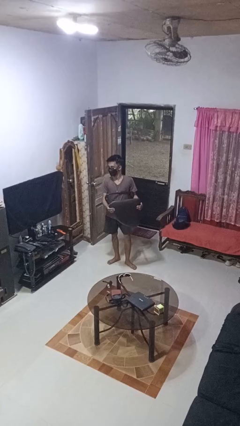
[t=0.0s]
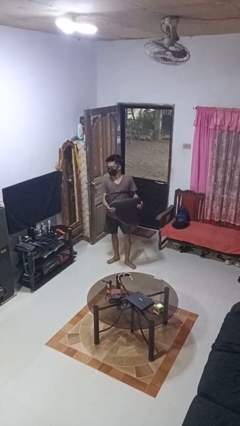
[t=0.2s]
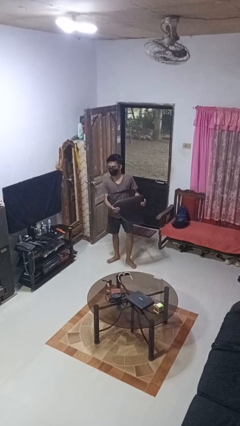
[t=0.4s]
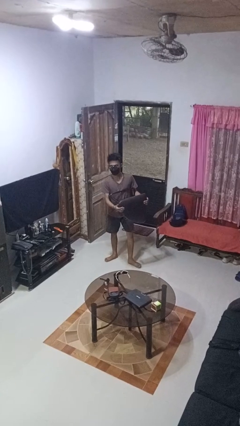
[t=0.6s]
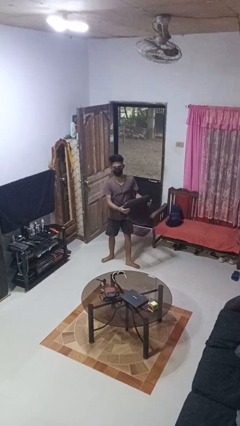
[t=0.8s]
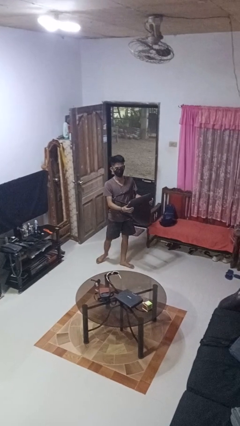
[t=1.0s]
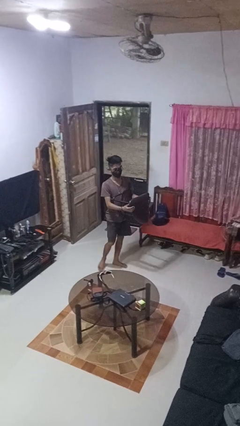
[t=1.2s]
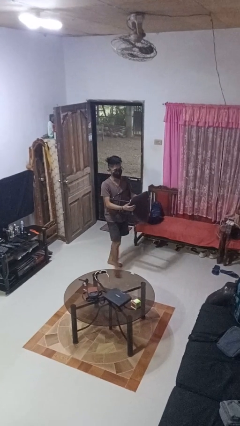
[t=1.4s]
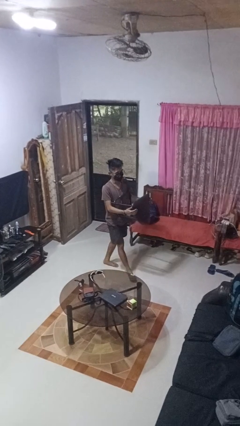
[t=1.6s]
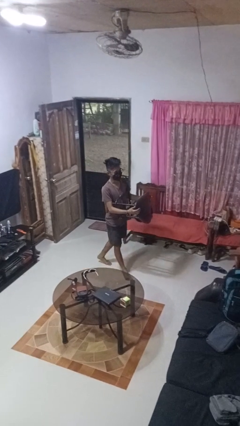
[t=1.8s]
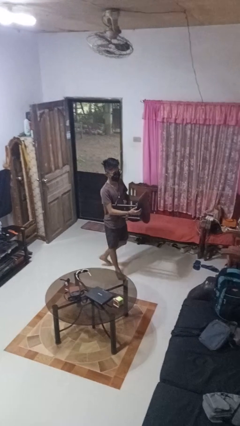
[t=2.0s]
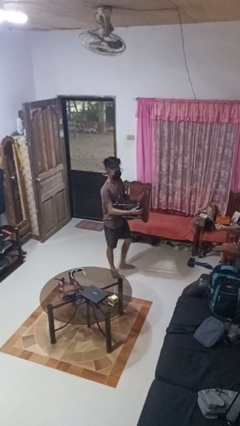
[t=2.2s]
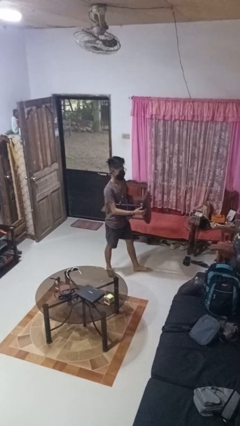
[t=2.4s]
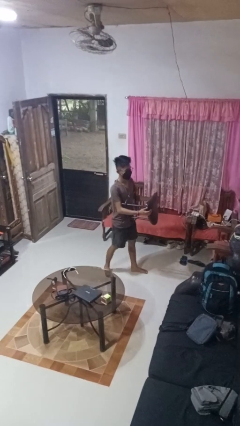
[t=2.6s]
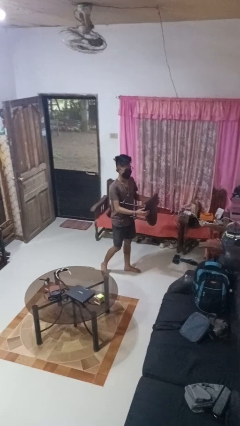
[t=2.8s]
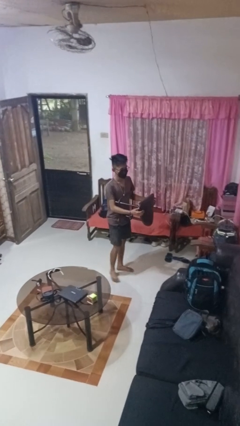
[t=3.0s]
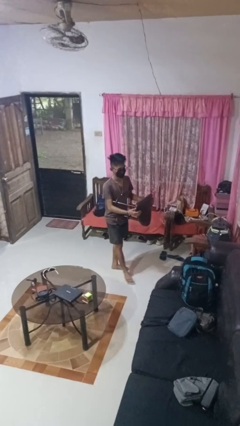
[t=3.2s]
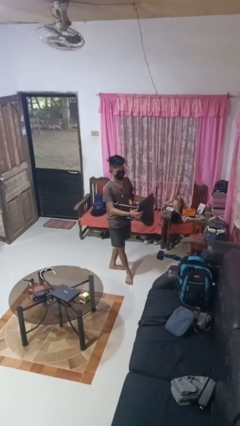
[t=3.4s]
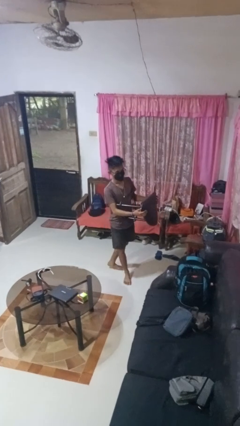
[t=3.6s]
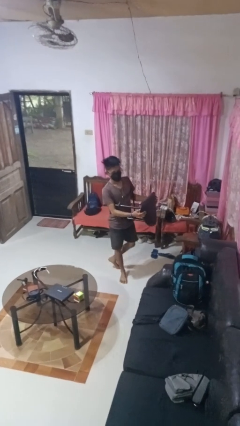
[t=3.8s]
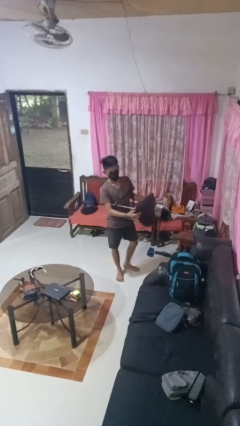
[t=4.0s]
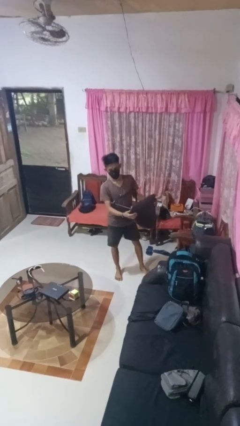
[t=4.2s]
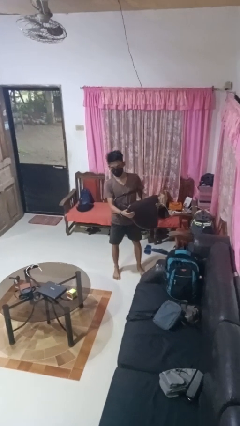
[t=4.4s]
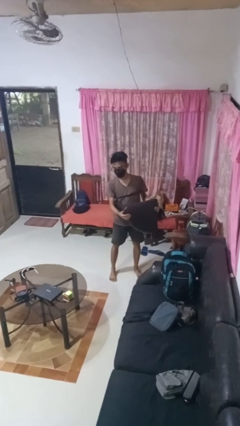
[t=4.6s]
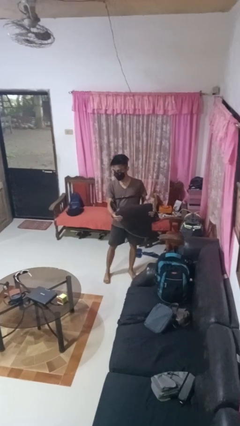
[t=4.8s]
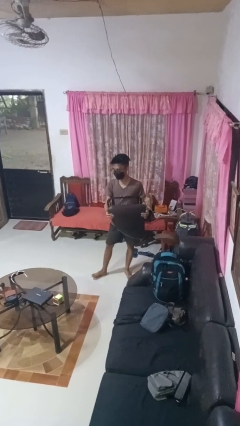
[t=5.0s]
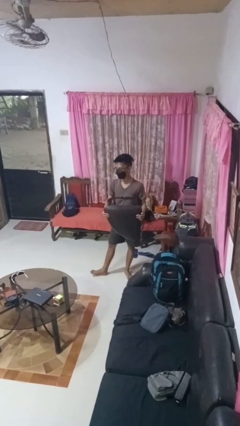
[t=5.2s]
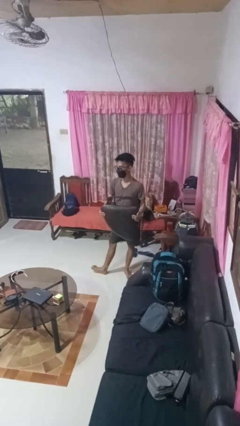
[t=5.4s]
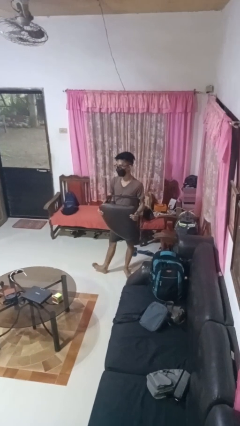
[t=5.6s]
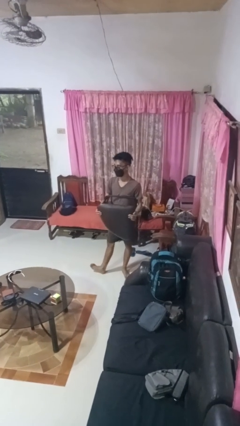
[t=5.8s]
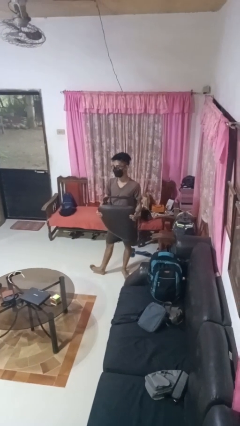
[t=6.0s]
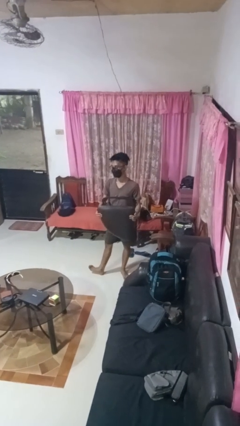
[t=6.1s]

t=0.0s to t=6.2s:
person carries furniture

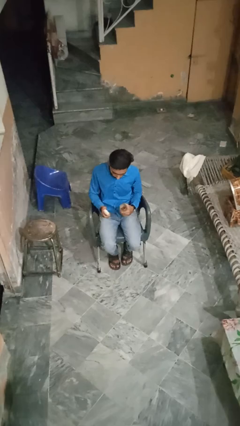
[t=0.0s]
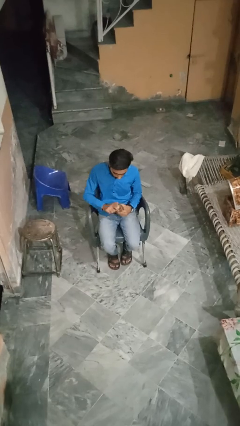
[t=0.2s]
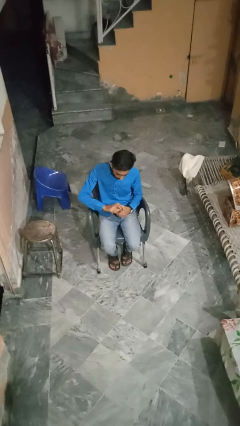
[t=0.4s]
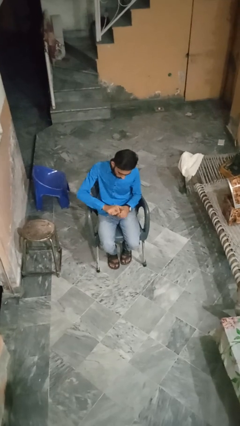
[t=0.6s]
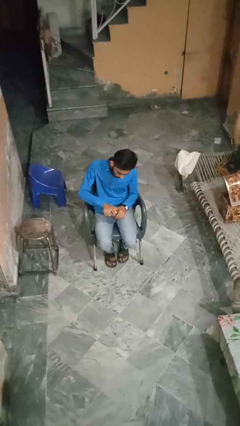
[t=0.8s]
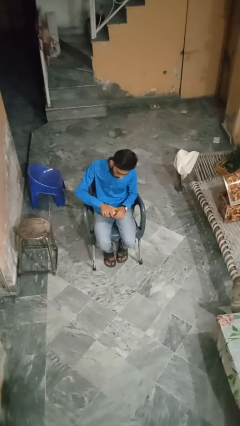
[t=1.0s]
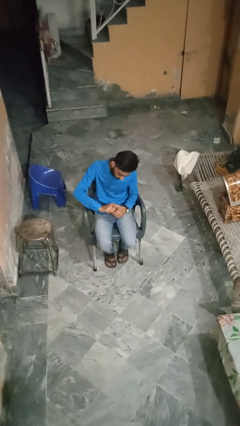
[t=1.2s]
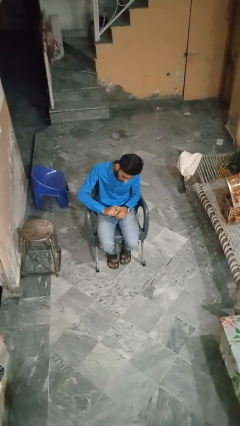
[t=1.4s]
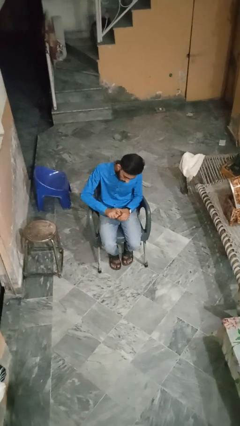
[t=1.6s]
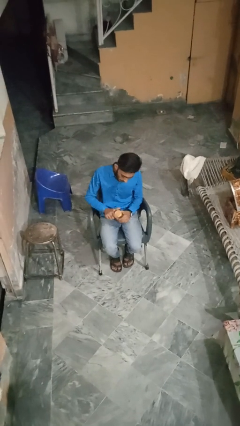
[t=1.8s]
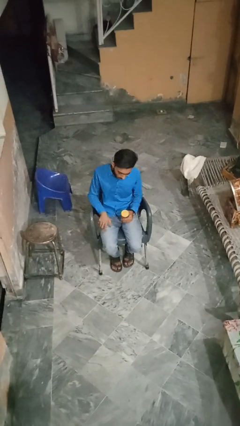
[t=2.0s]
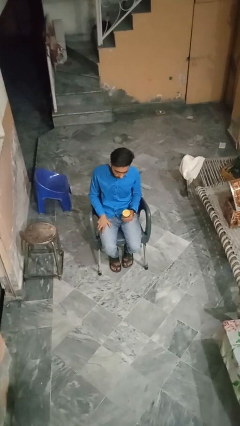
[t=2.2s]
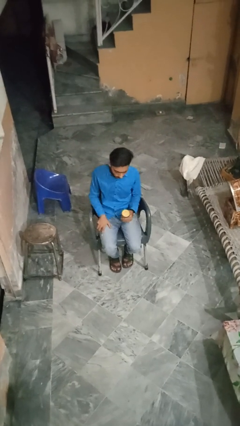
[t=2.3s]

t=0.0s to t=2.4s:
person closes jar

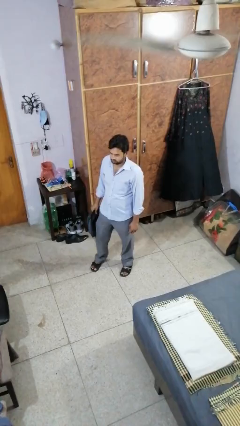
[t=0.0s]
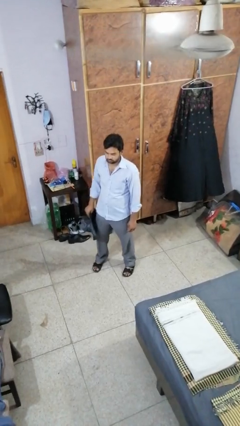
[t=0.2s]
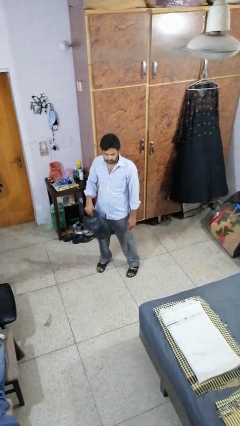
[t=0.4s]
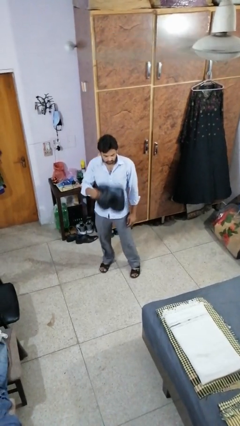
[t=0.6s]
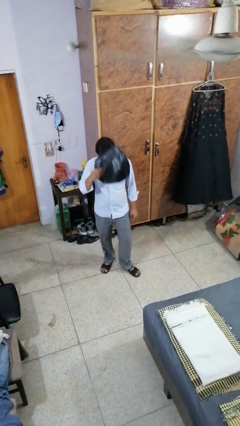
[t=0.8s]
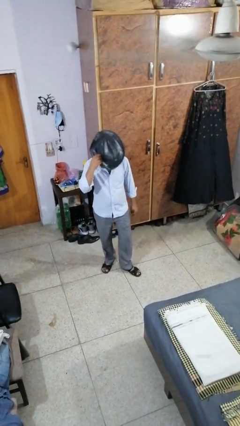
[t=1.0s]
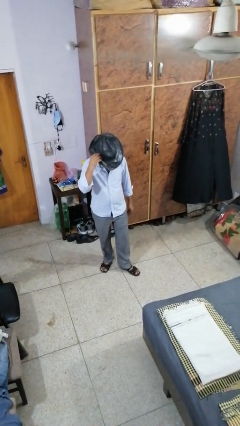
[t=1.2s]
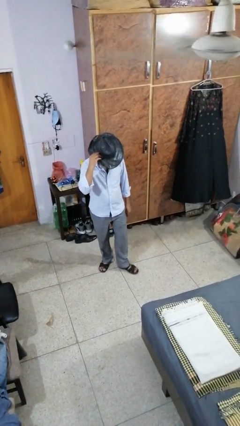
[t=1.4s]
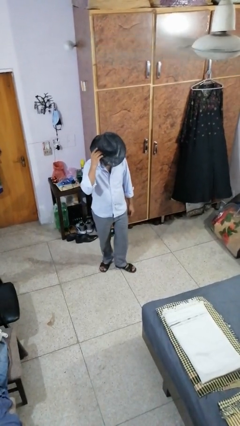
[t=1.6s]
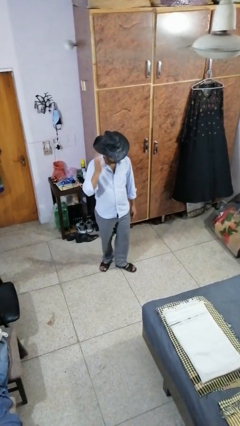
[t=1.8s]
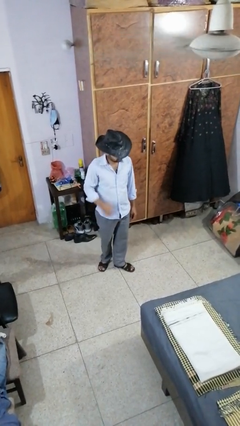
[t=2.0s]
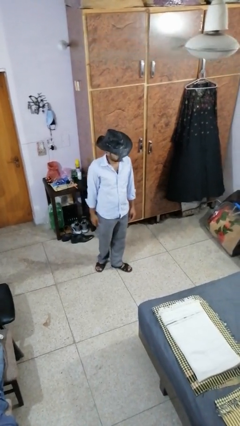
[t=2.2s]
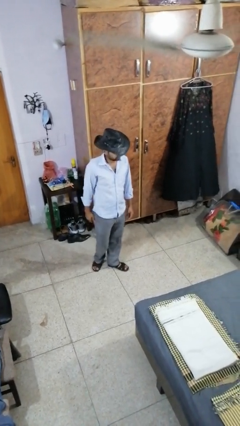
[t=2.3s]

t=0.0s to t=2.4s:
person puts on hat

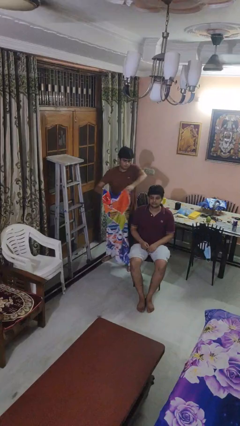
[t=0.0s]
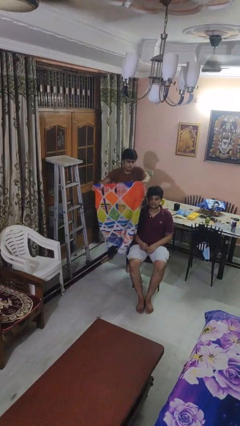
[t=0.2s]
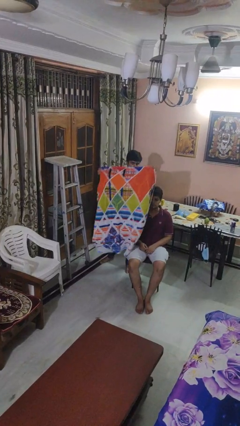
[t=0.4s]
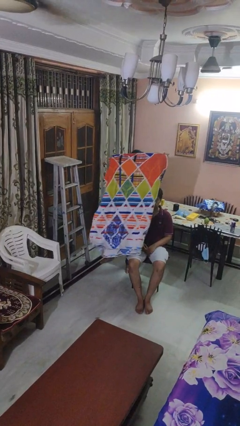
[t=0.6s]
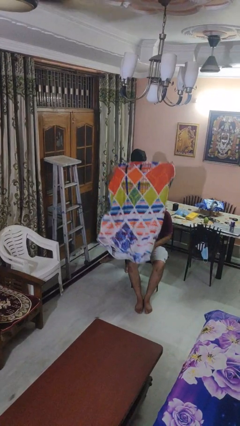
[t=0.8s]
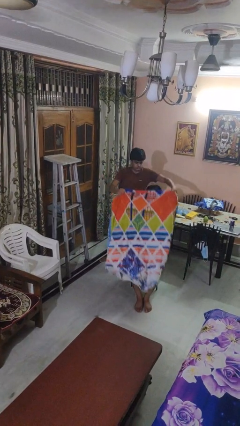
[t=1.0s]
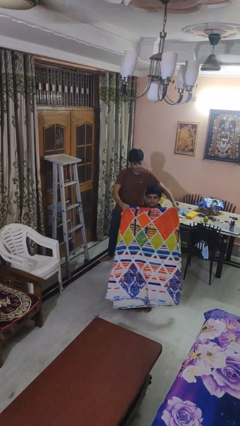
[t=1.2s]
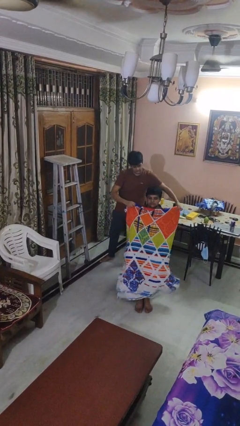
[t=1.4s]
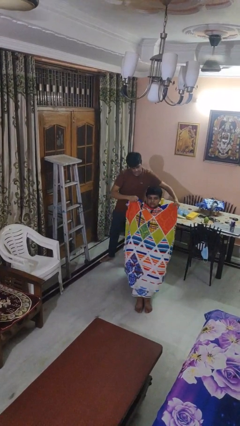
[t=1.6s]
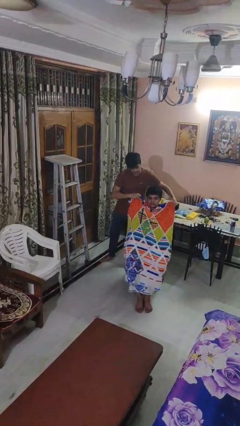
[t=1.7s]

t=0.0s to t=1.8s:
person covers friend with blanket

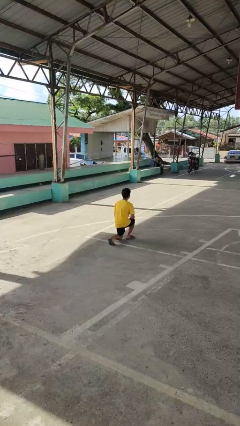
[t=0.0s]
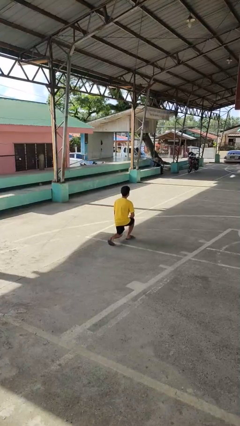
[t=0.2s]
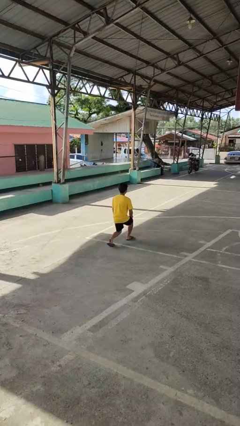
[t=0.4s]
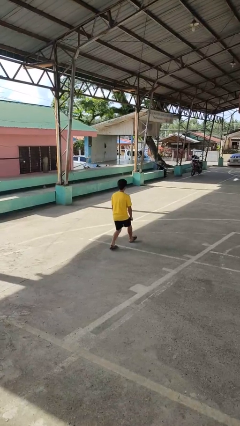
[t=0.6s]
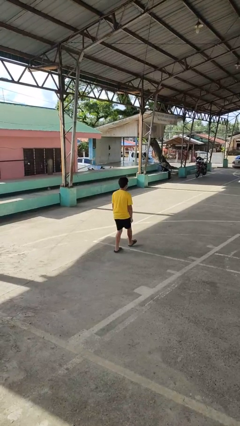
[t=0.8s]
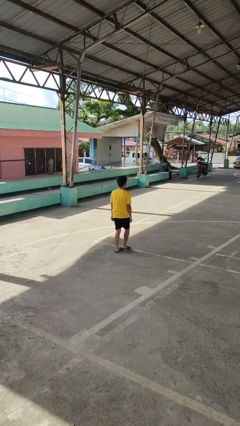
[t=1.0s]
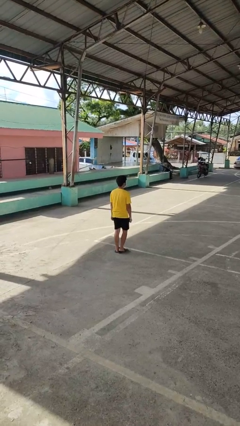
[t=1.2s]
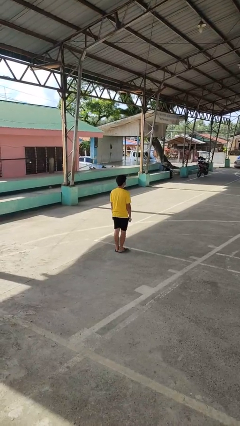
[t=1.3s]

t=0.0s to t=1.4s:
person stands up from floor

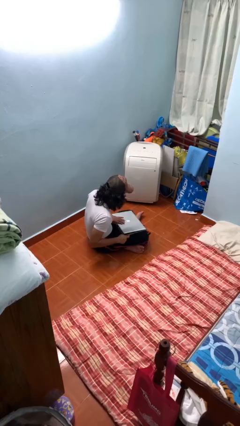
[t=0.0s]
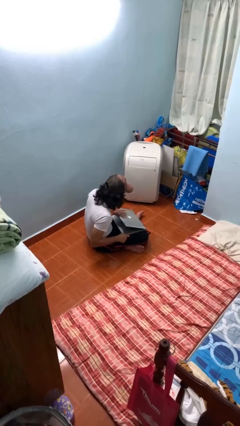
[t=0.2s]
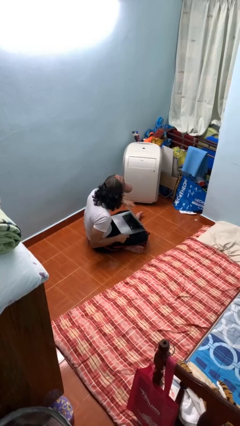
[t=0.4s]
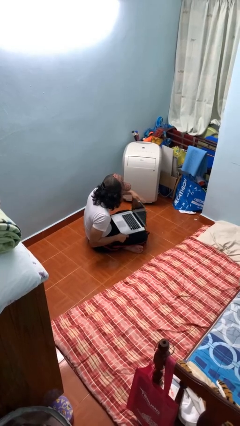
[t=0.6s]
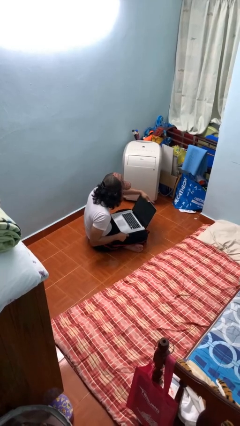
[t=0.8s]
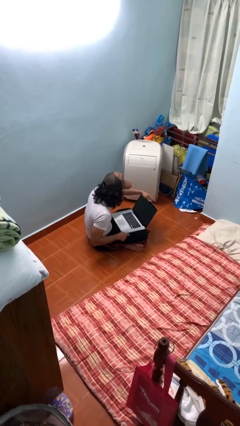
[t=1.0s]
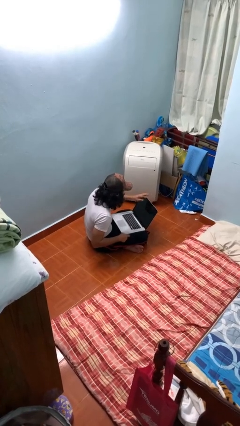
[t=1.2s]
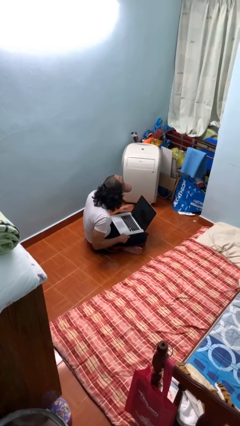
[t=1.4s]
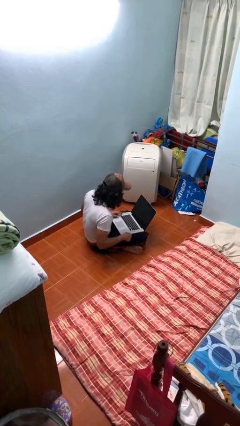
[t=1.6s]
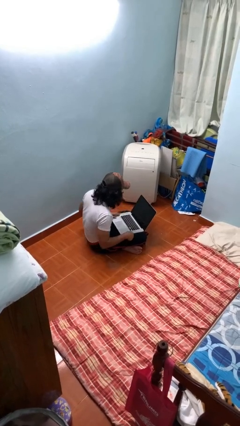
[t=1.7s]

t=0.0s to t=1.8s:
person opens laptop

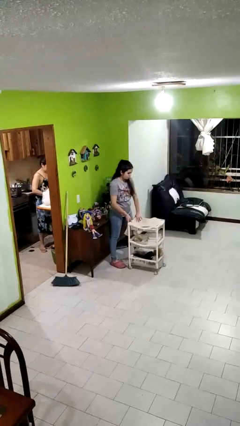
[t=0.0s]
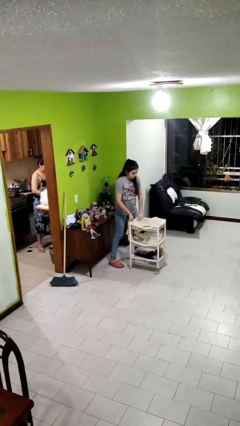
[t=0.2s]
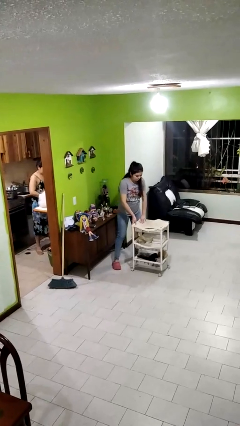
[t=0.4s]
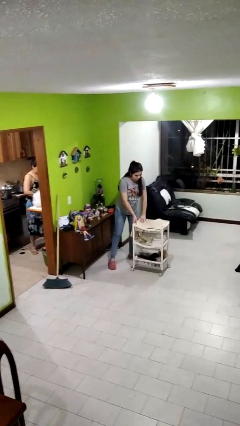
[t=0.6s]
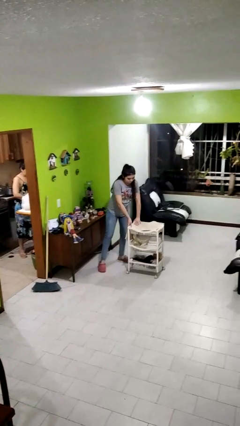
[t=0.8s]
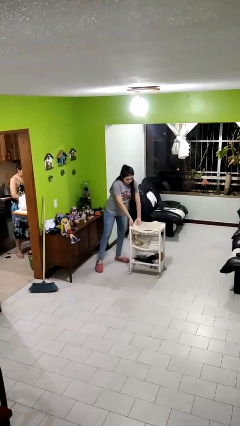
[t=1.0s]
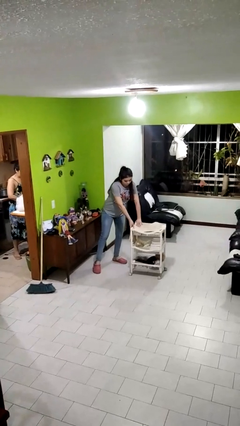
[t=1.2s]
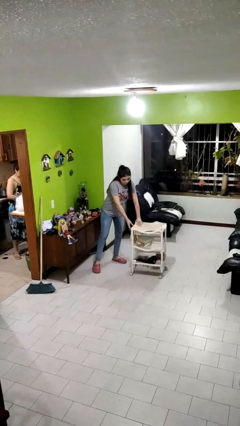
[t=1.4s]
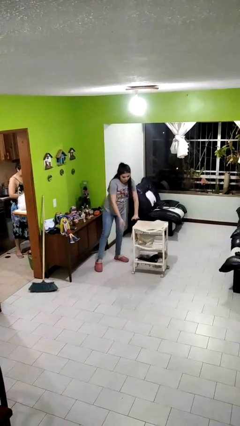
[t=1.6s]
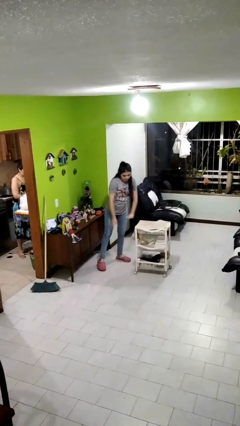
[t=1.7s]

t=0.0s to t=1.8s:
person pushes wheeled cart
